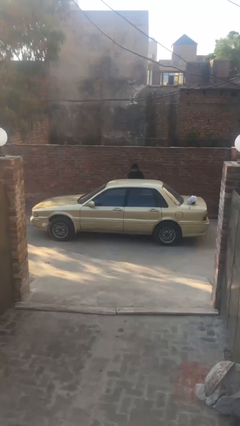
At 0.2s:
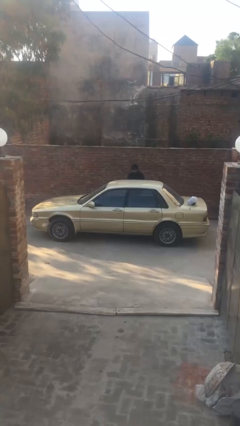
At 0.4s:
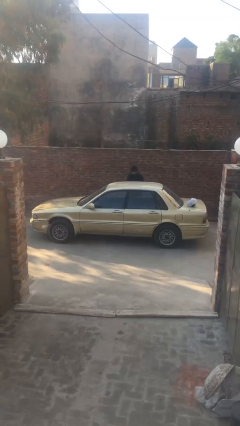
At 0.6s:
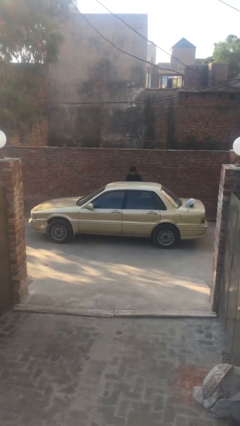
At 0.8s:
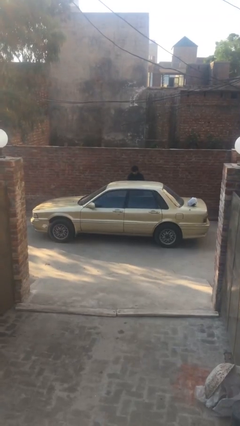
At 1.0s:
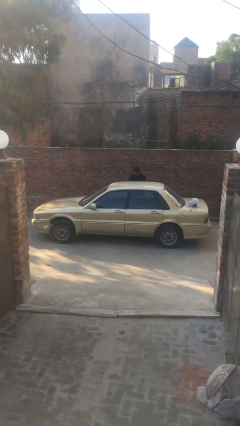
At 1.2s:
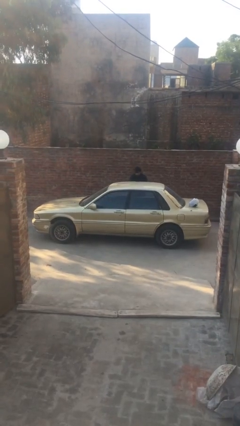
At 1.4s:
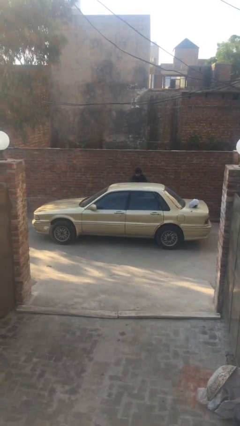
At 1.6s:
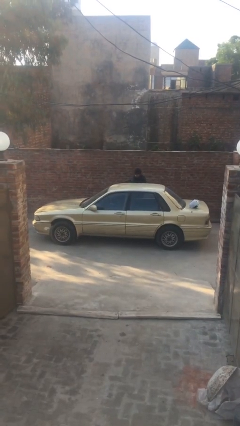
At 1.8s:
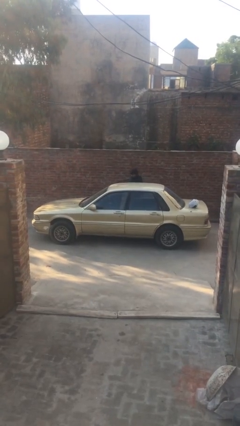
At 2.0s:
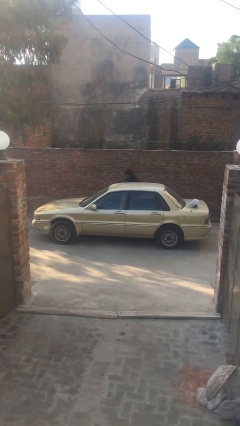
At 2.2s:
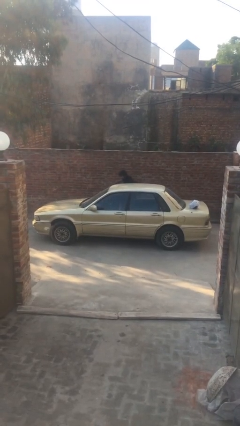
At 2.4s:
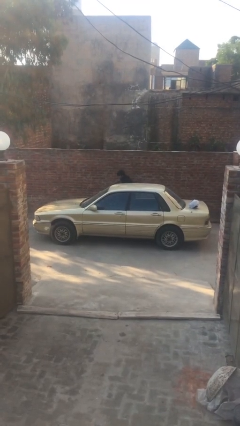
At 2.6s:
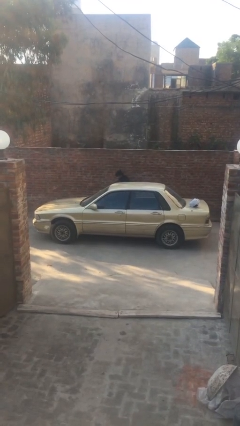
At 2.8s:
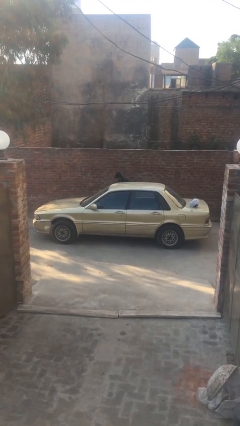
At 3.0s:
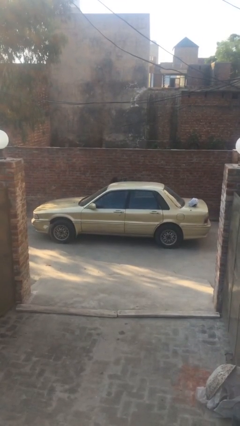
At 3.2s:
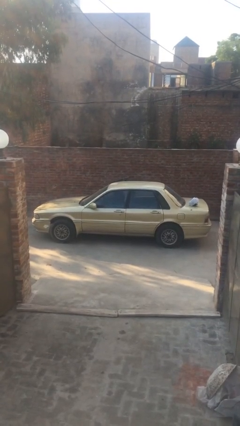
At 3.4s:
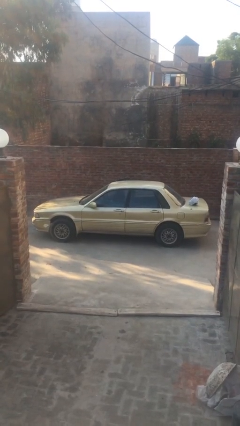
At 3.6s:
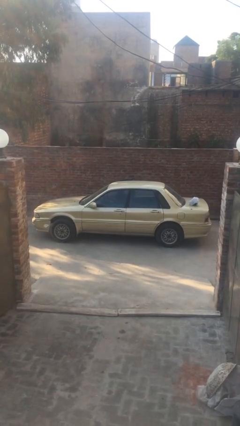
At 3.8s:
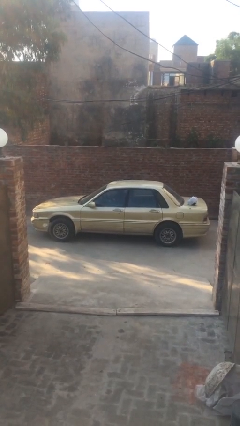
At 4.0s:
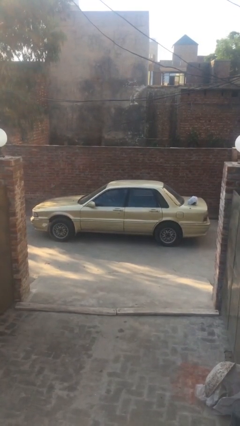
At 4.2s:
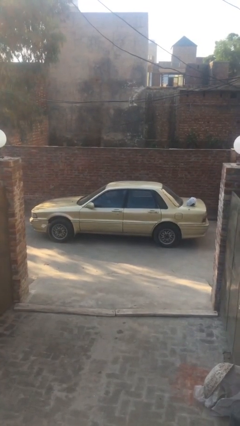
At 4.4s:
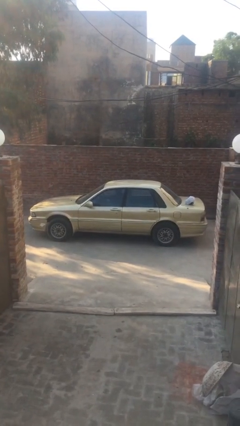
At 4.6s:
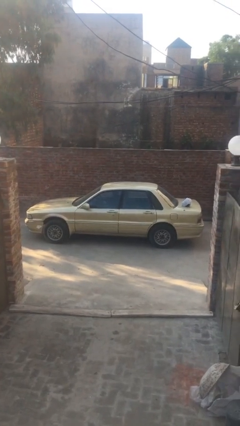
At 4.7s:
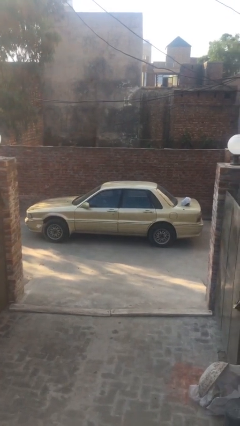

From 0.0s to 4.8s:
car picks up person

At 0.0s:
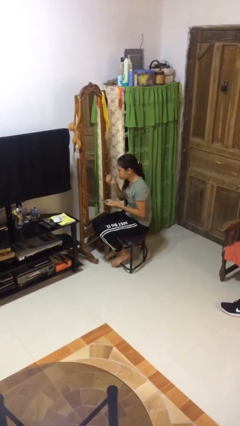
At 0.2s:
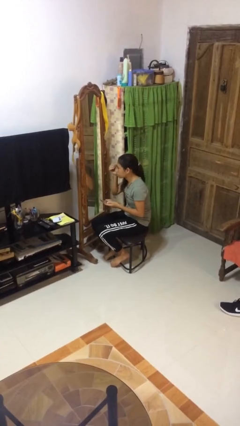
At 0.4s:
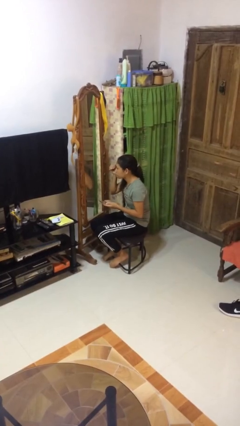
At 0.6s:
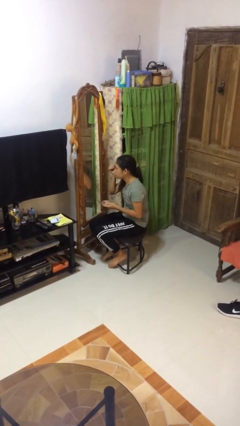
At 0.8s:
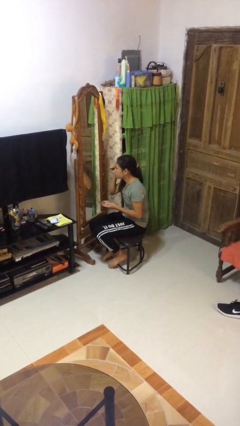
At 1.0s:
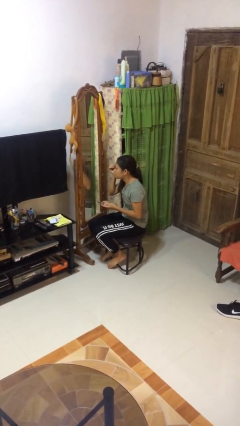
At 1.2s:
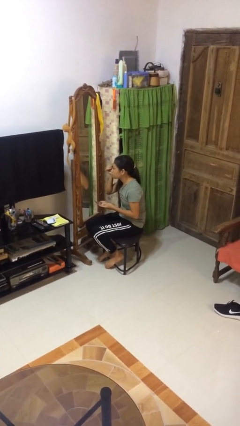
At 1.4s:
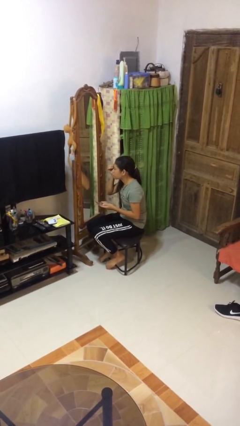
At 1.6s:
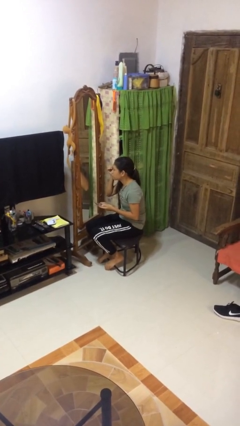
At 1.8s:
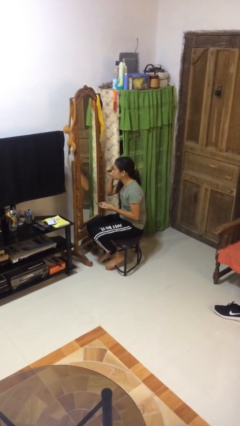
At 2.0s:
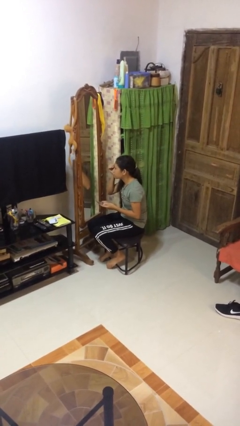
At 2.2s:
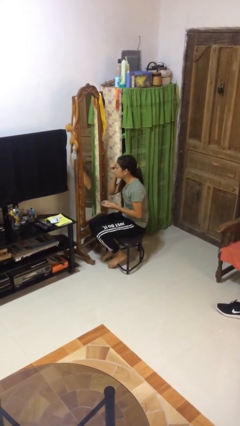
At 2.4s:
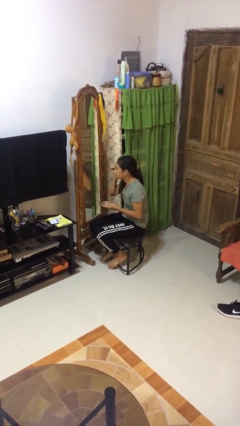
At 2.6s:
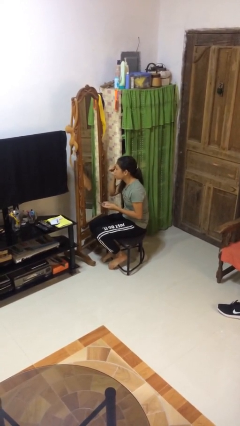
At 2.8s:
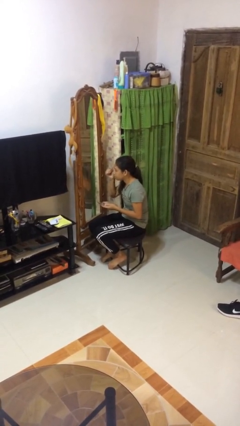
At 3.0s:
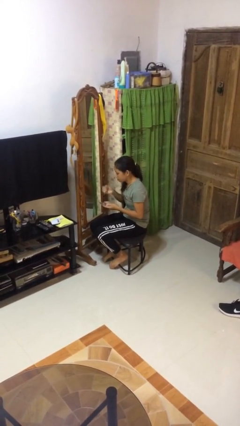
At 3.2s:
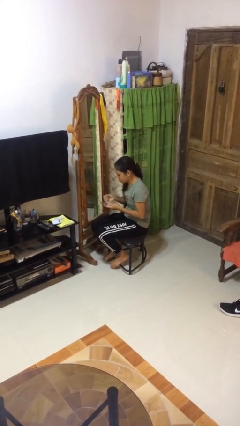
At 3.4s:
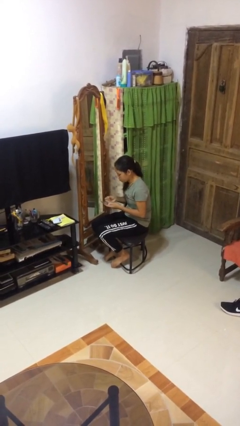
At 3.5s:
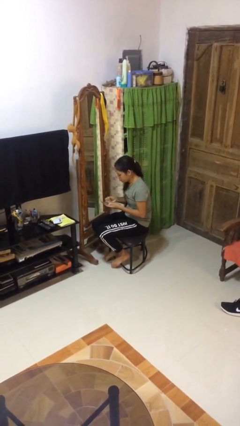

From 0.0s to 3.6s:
person applies eye makeup

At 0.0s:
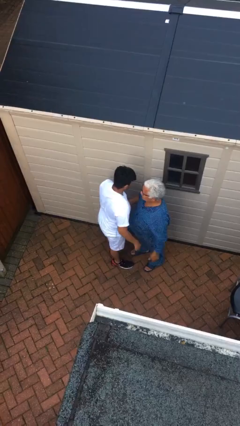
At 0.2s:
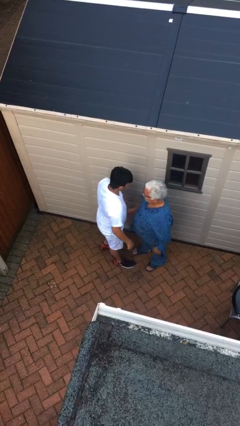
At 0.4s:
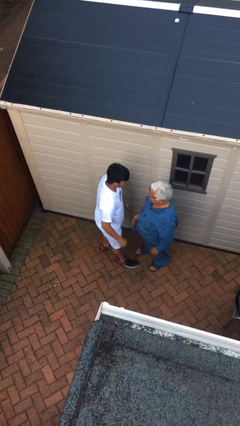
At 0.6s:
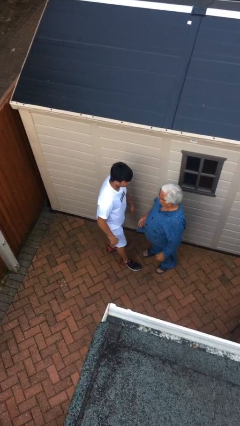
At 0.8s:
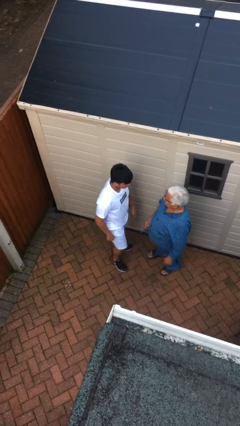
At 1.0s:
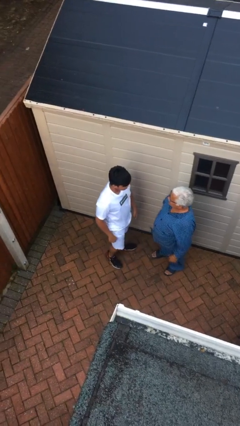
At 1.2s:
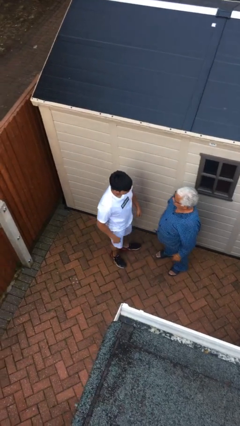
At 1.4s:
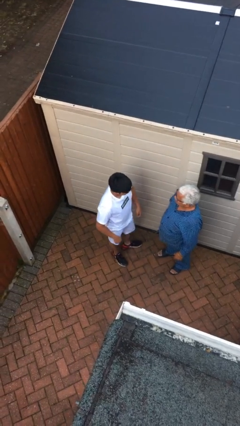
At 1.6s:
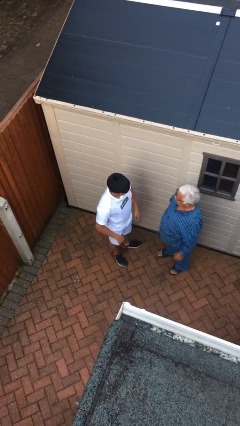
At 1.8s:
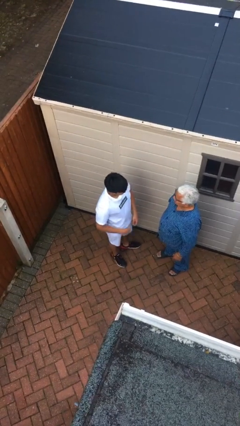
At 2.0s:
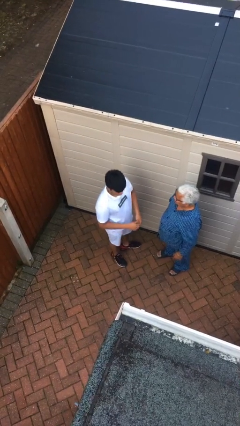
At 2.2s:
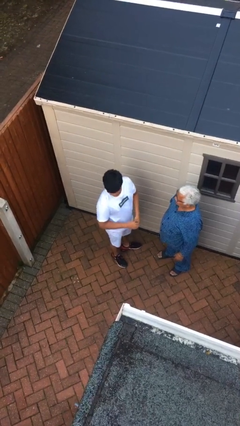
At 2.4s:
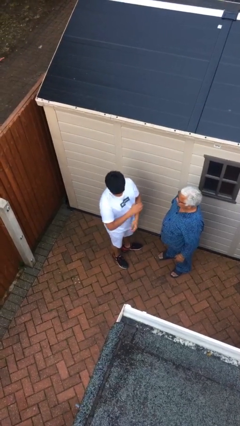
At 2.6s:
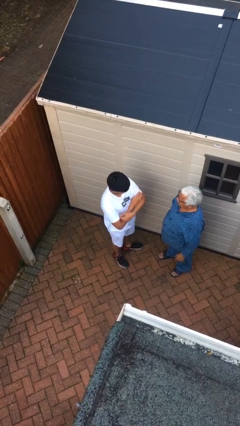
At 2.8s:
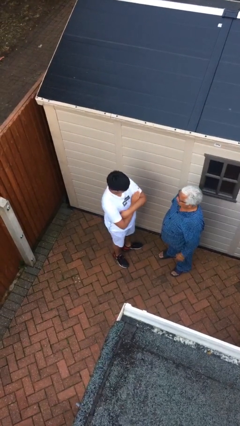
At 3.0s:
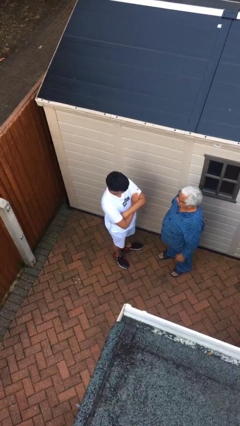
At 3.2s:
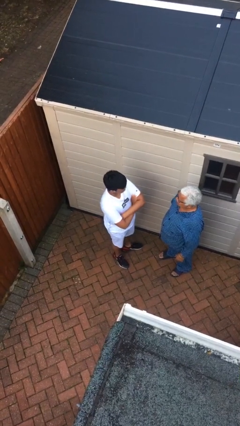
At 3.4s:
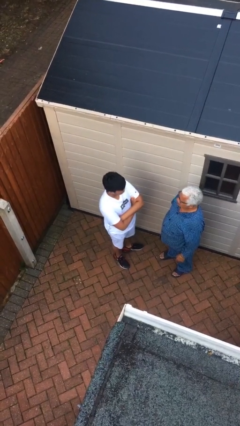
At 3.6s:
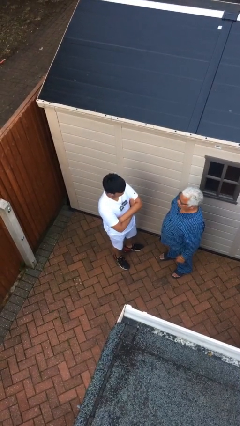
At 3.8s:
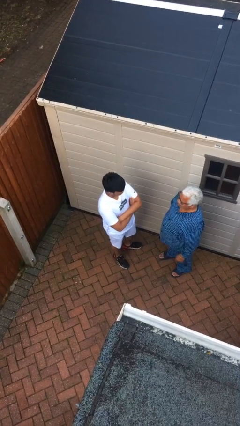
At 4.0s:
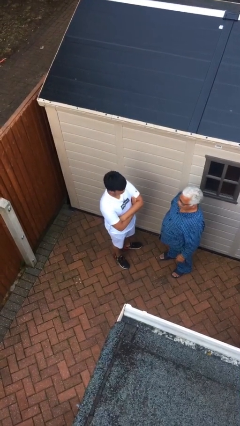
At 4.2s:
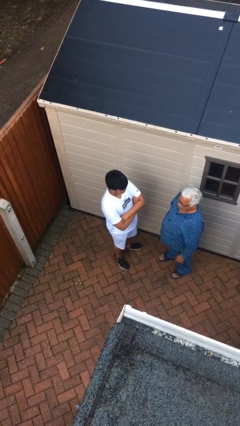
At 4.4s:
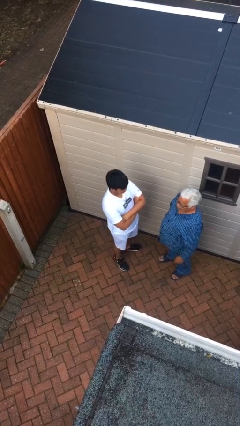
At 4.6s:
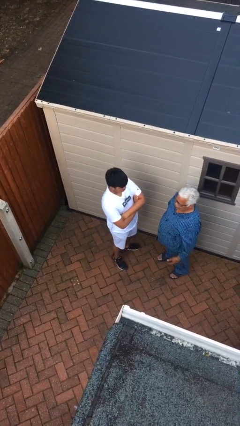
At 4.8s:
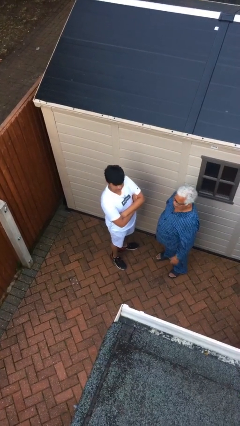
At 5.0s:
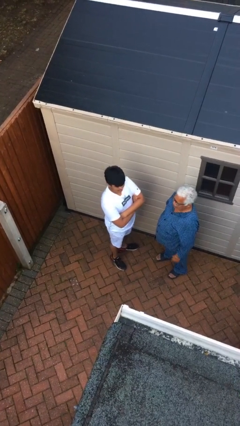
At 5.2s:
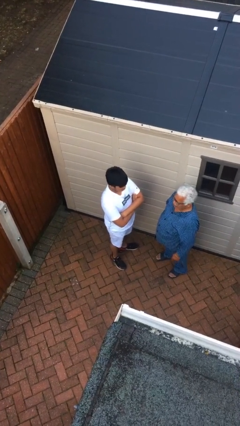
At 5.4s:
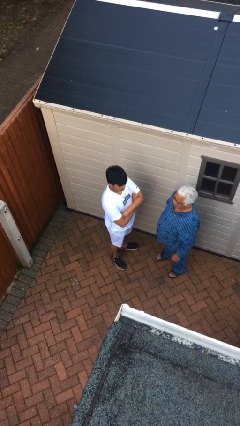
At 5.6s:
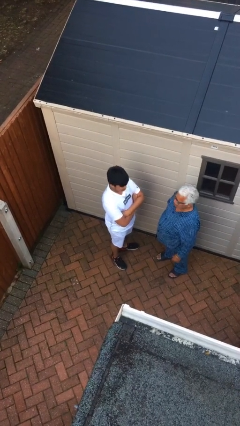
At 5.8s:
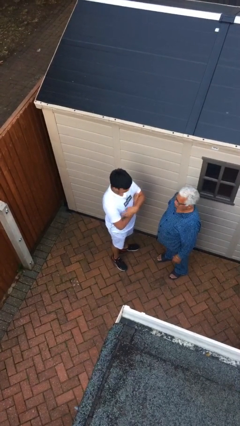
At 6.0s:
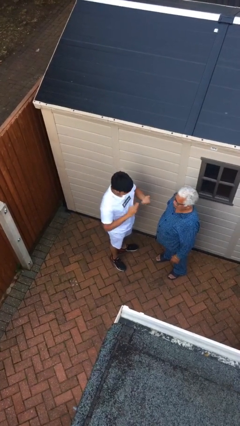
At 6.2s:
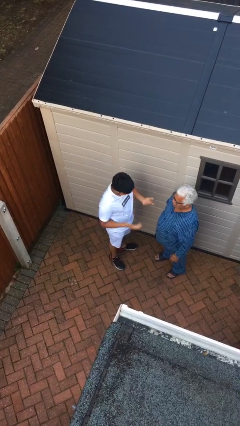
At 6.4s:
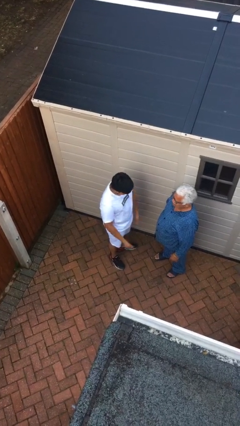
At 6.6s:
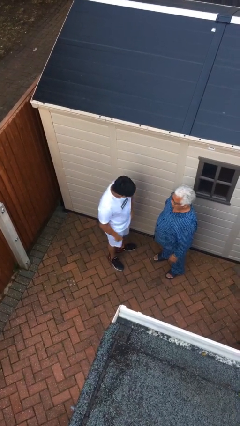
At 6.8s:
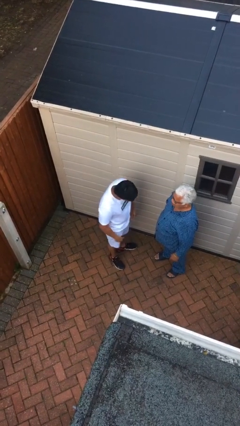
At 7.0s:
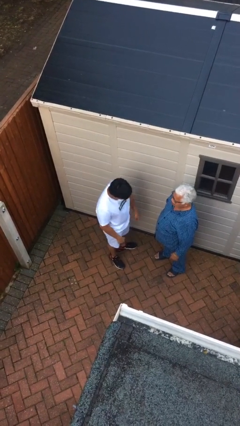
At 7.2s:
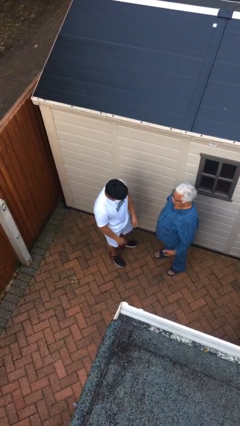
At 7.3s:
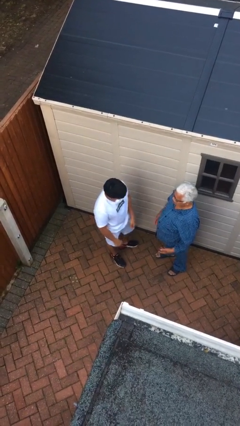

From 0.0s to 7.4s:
person talks to person

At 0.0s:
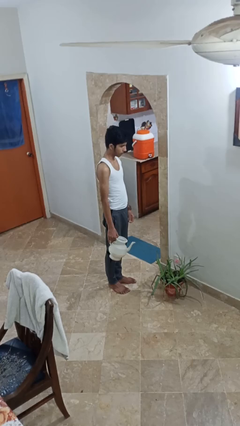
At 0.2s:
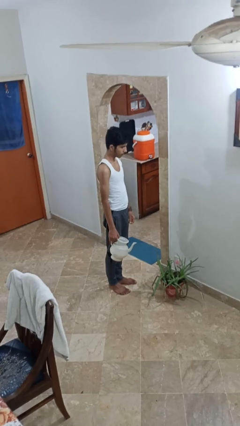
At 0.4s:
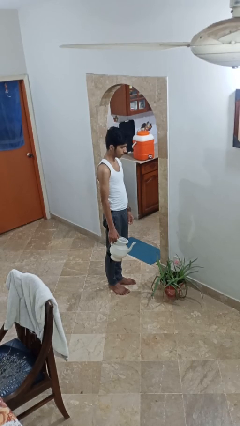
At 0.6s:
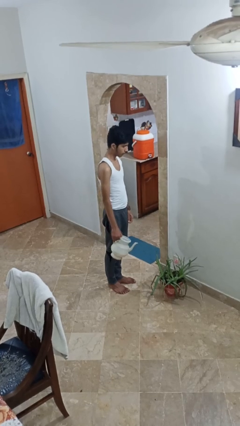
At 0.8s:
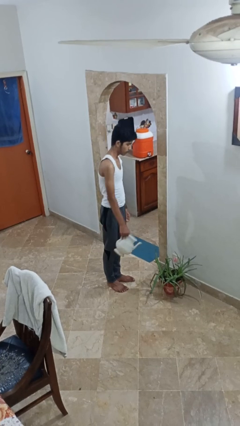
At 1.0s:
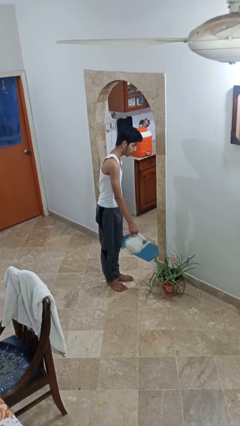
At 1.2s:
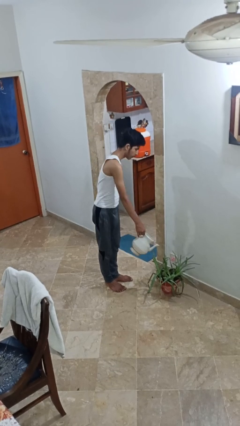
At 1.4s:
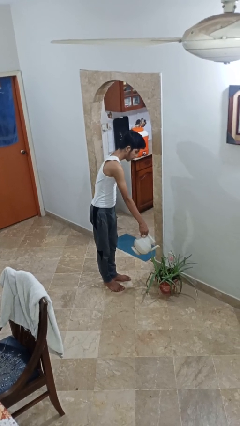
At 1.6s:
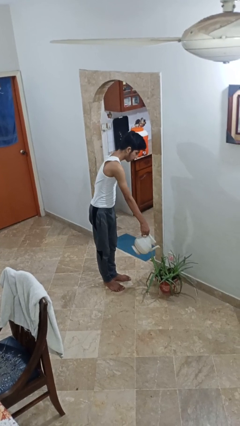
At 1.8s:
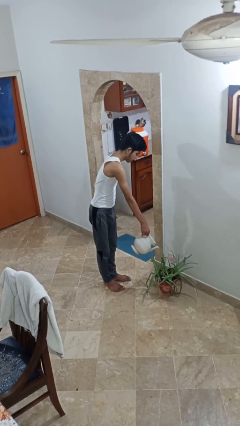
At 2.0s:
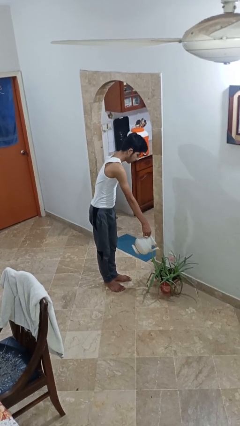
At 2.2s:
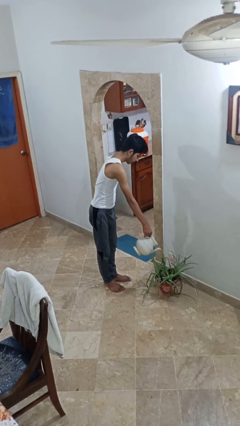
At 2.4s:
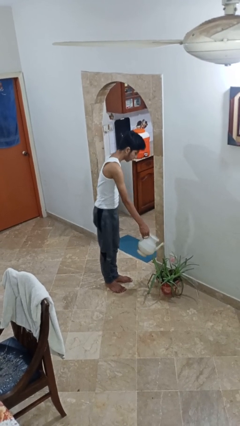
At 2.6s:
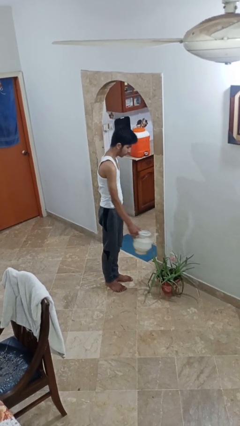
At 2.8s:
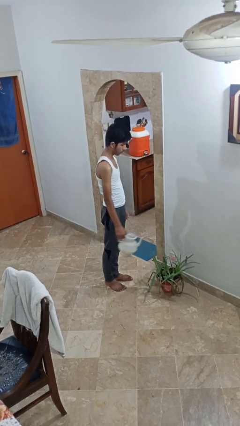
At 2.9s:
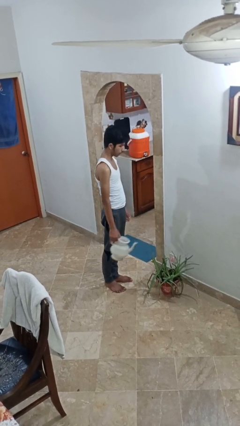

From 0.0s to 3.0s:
person waters houseplant
